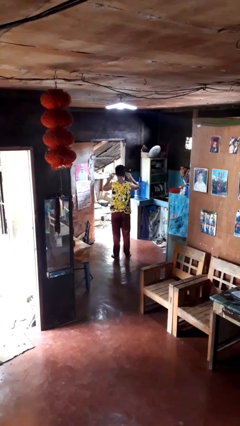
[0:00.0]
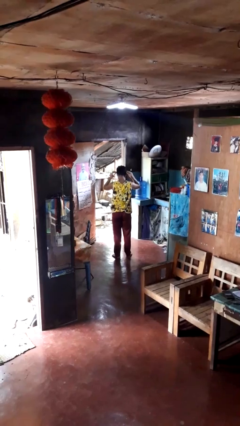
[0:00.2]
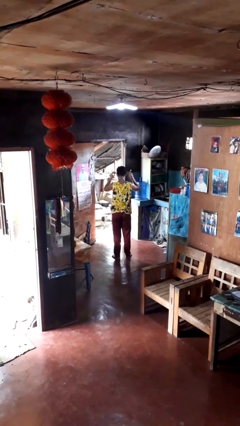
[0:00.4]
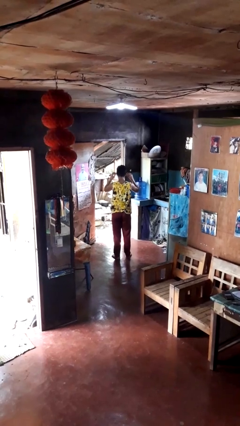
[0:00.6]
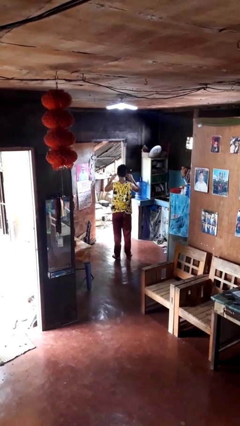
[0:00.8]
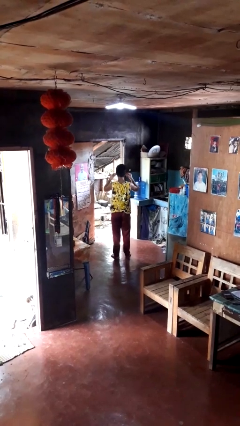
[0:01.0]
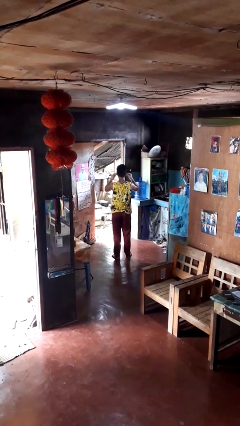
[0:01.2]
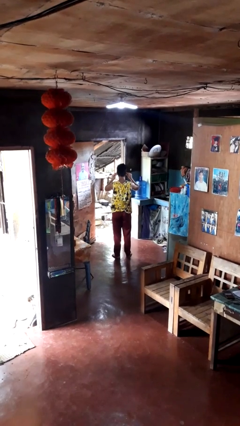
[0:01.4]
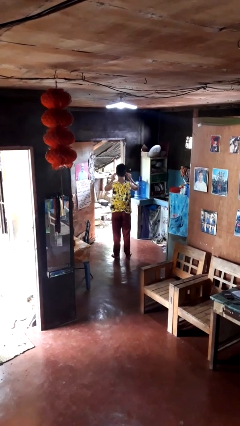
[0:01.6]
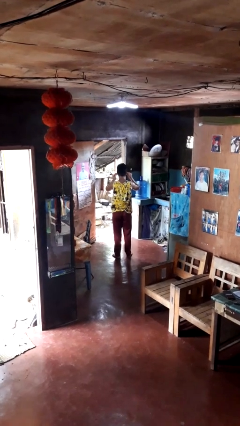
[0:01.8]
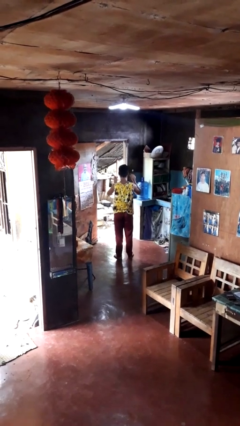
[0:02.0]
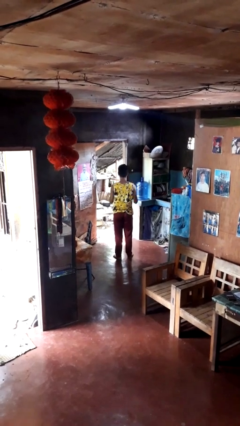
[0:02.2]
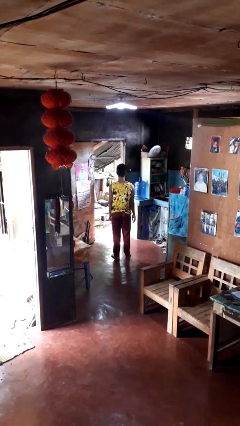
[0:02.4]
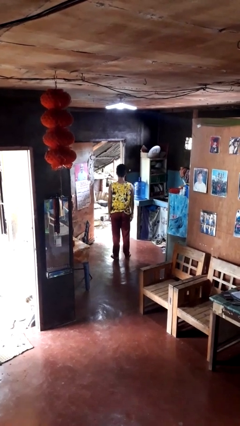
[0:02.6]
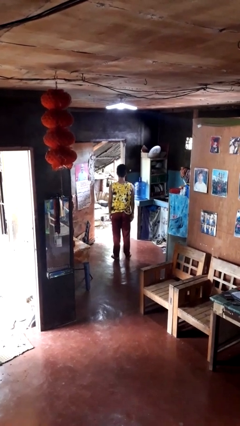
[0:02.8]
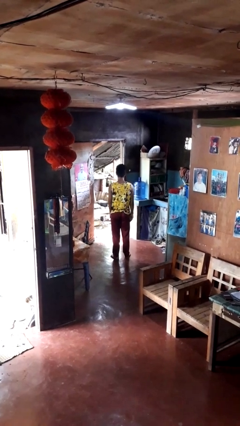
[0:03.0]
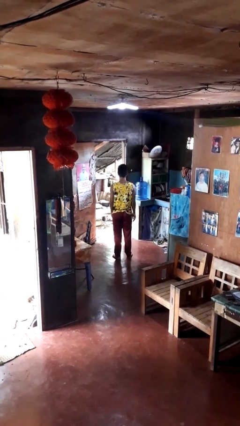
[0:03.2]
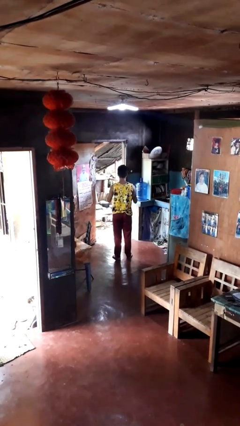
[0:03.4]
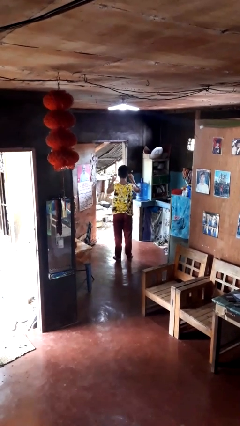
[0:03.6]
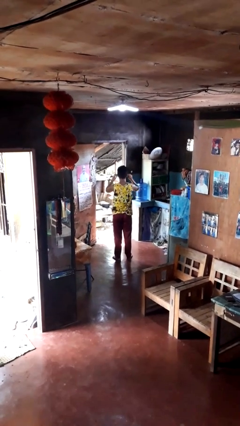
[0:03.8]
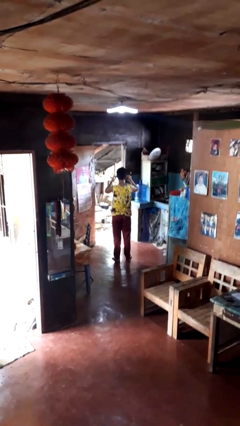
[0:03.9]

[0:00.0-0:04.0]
person puts on headphones

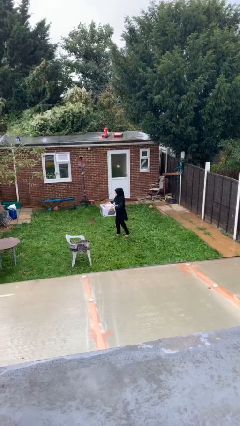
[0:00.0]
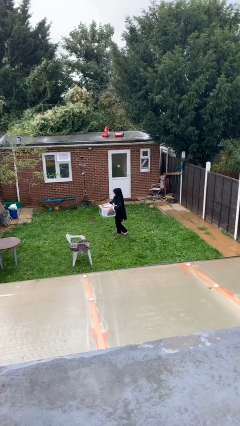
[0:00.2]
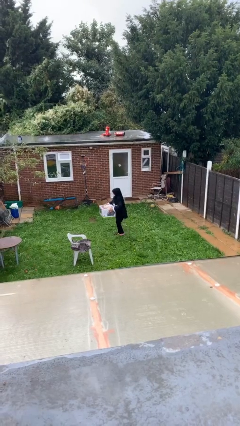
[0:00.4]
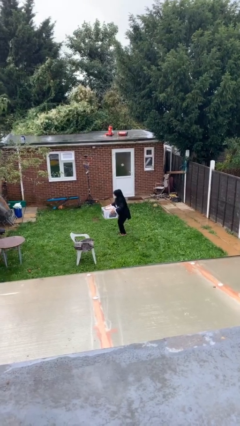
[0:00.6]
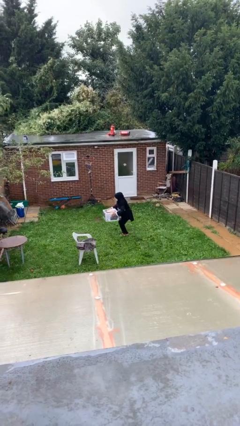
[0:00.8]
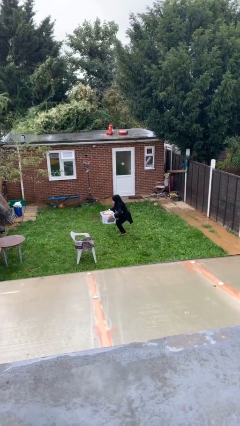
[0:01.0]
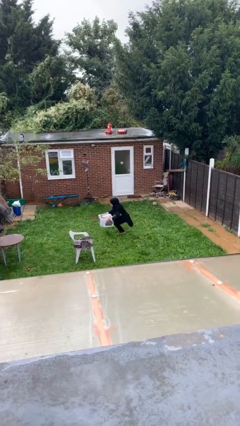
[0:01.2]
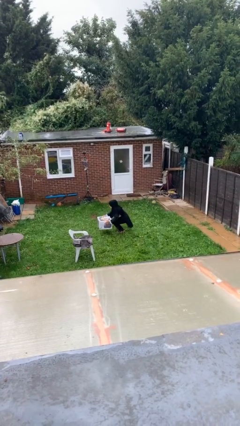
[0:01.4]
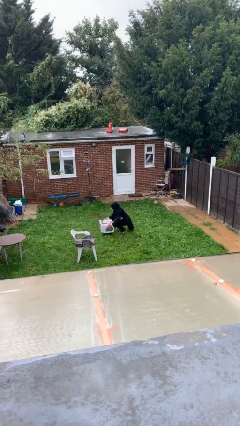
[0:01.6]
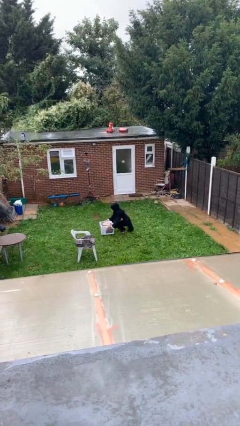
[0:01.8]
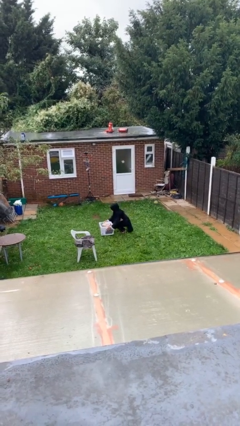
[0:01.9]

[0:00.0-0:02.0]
person puts down object on floor

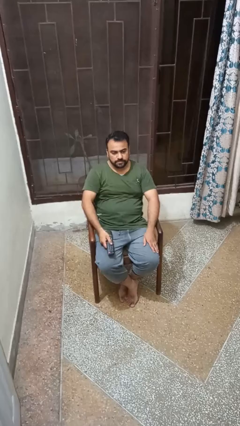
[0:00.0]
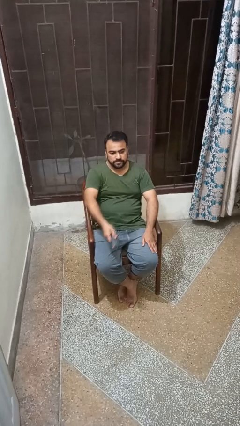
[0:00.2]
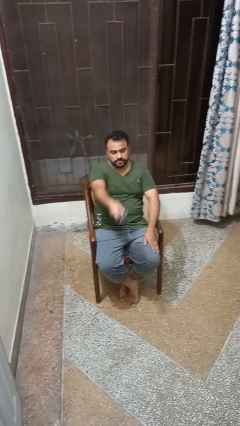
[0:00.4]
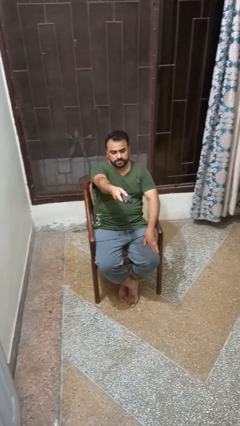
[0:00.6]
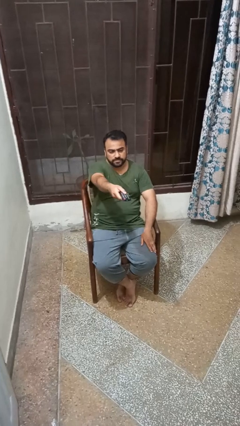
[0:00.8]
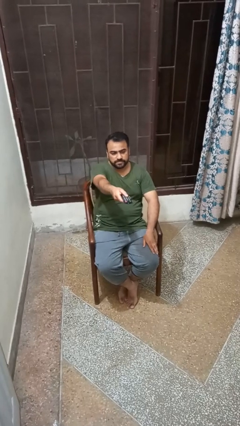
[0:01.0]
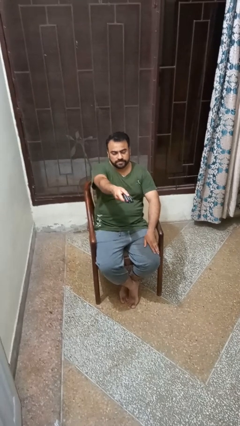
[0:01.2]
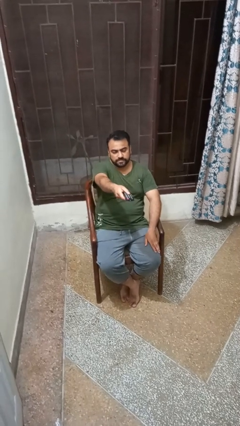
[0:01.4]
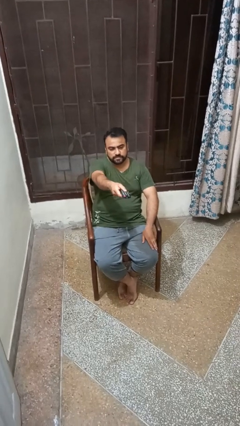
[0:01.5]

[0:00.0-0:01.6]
person uses television remote

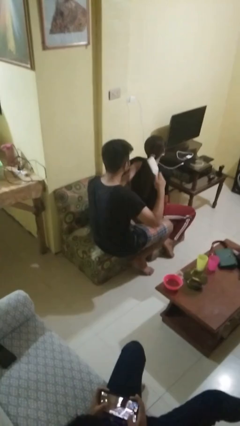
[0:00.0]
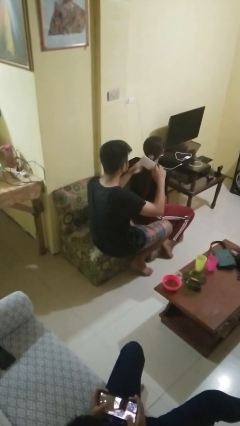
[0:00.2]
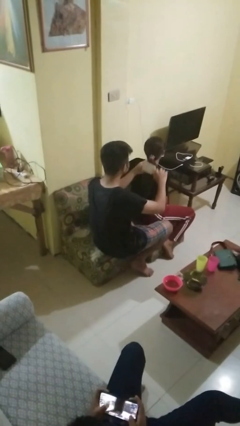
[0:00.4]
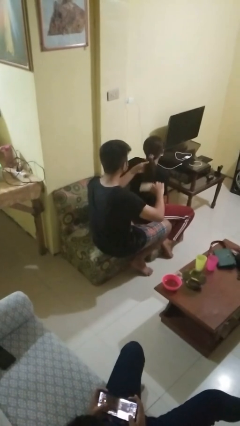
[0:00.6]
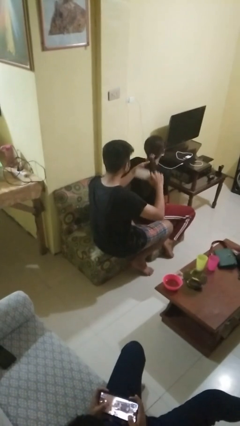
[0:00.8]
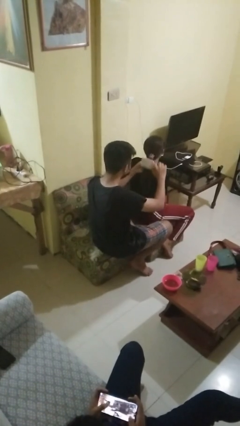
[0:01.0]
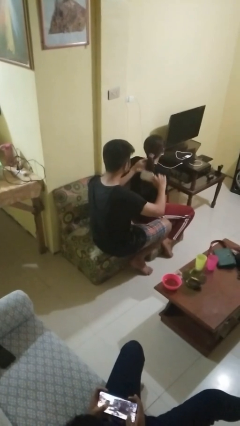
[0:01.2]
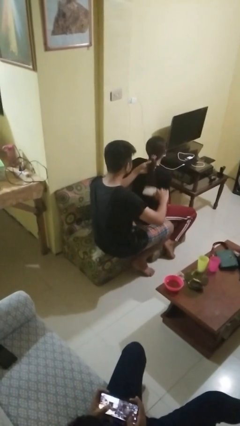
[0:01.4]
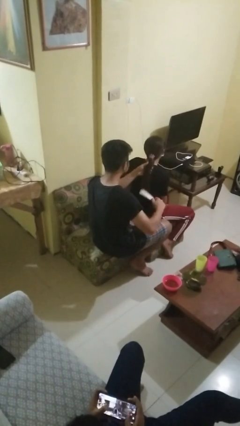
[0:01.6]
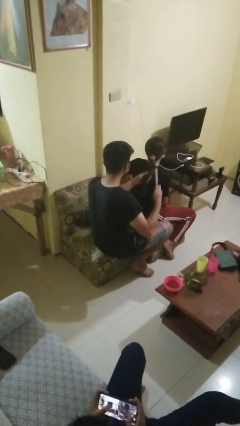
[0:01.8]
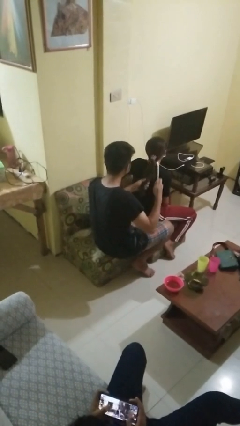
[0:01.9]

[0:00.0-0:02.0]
person brushes hair of person

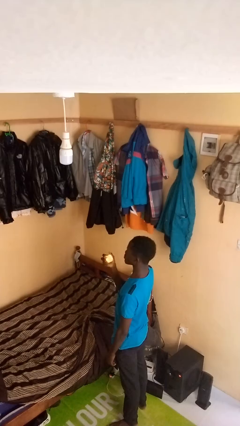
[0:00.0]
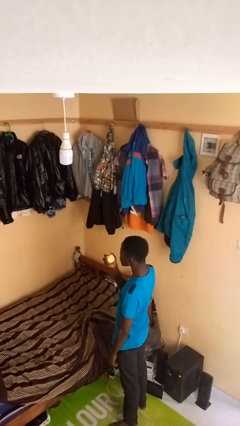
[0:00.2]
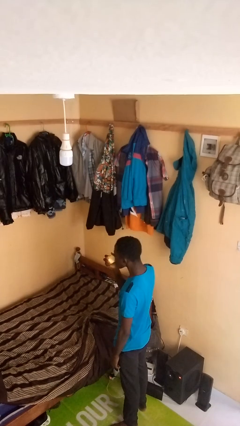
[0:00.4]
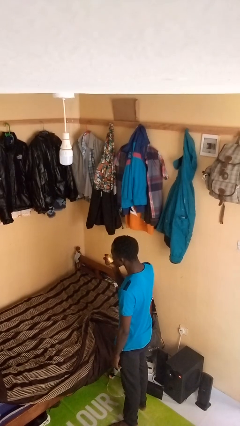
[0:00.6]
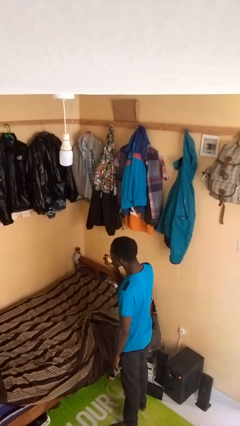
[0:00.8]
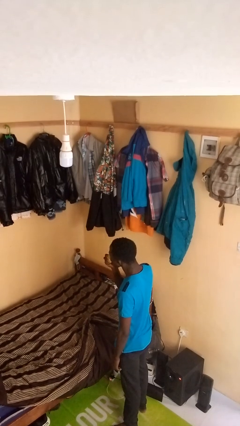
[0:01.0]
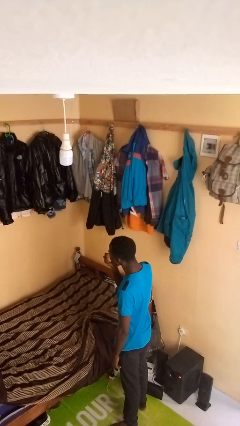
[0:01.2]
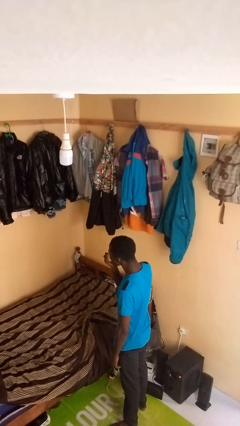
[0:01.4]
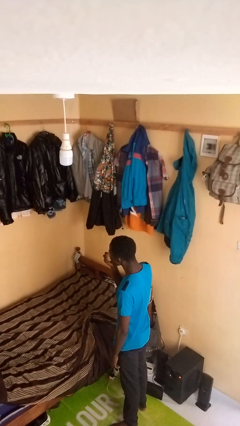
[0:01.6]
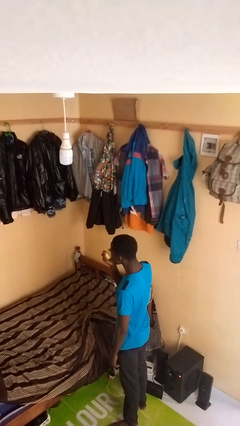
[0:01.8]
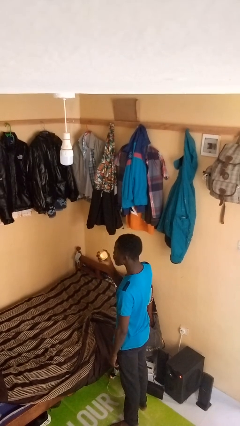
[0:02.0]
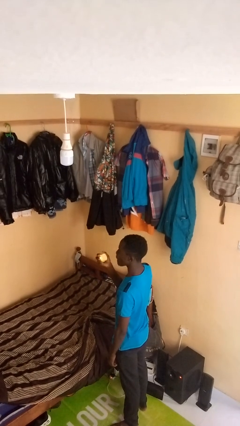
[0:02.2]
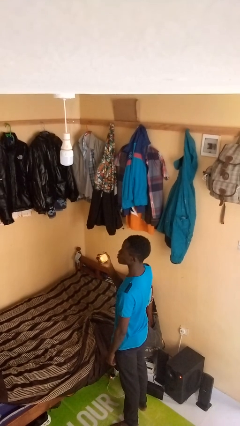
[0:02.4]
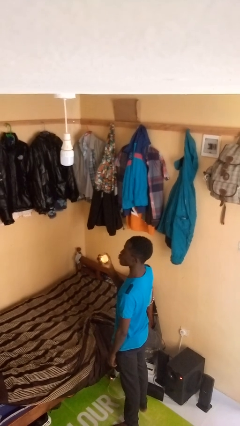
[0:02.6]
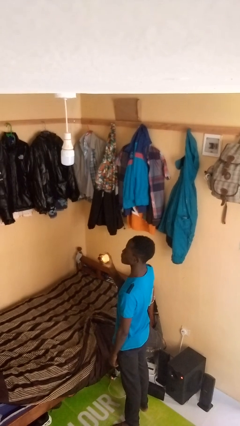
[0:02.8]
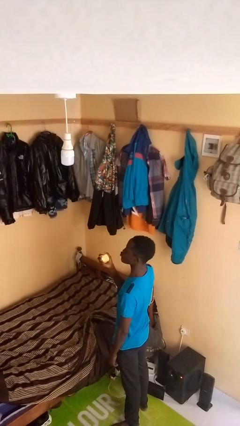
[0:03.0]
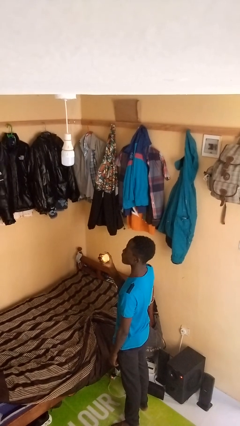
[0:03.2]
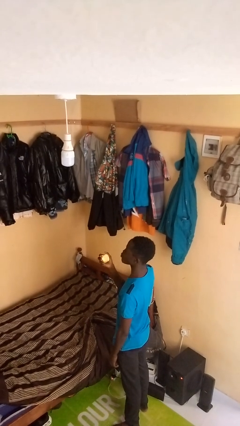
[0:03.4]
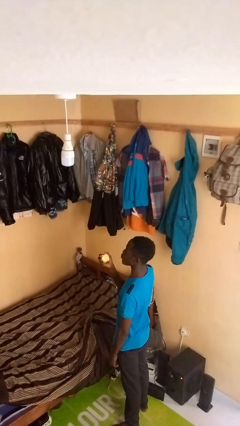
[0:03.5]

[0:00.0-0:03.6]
person eats apple

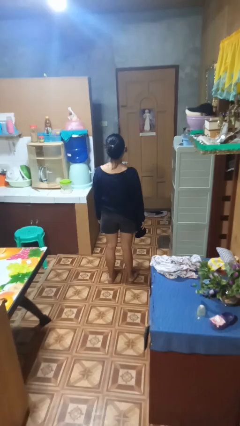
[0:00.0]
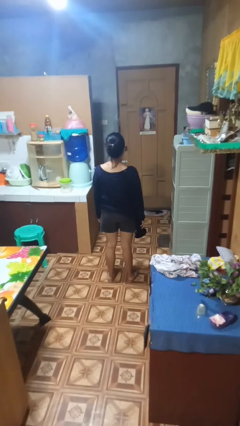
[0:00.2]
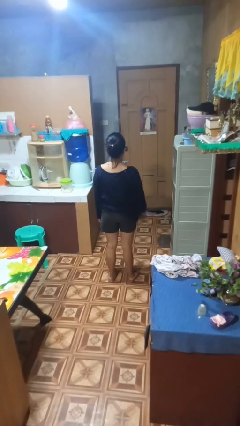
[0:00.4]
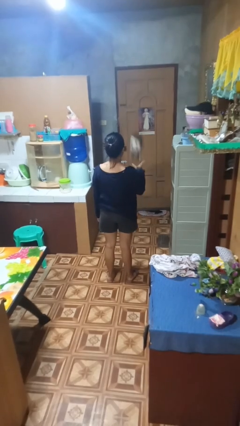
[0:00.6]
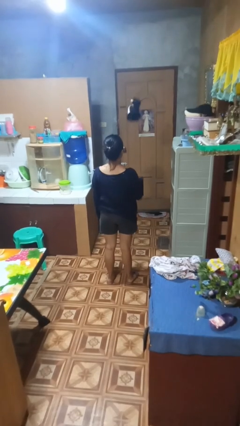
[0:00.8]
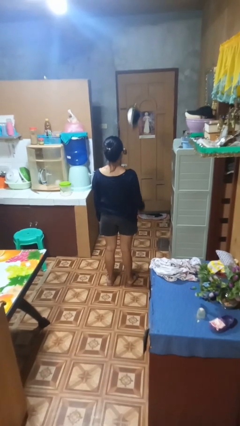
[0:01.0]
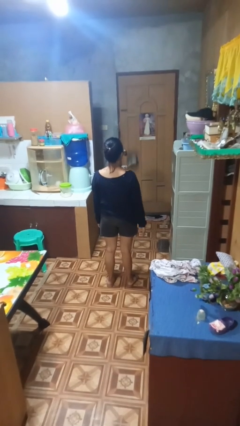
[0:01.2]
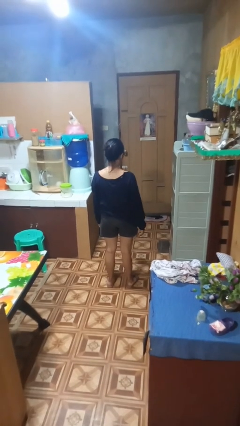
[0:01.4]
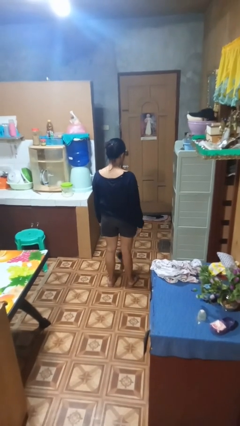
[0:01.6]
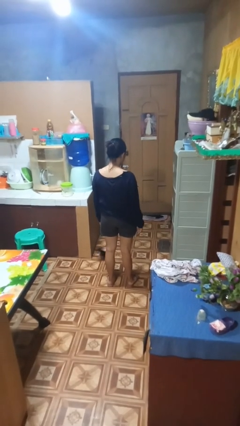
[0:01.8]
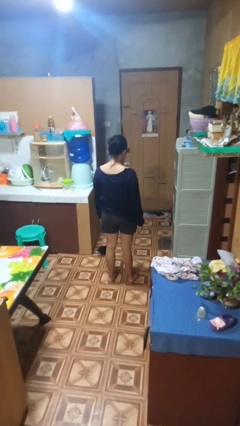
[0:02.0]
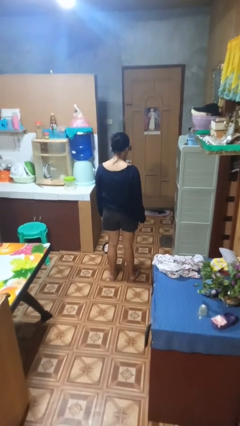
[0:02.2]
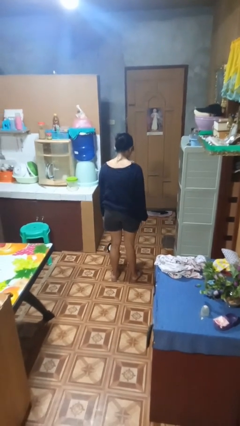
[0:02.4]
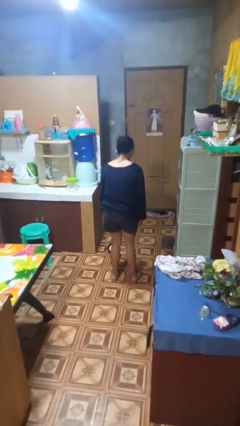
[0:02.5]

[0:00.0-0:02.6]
person throws object into air

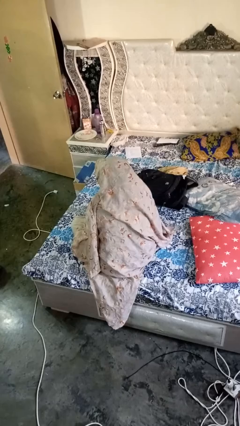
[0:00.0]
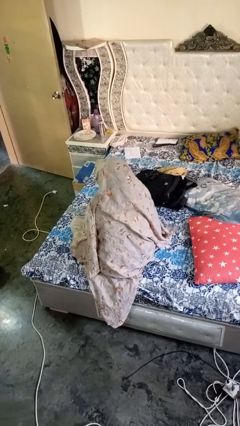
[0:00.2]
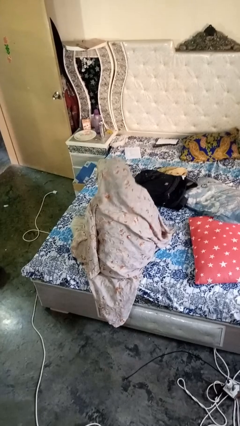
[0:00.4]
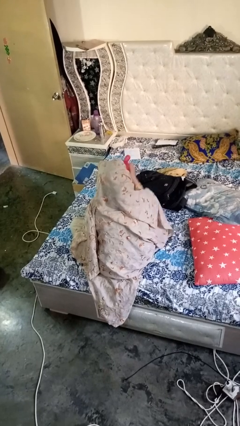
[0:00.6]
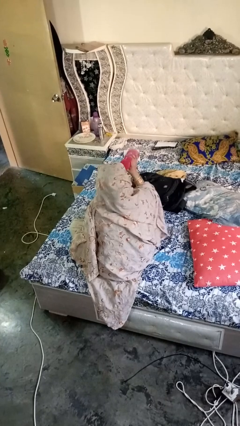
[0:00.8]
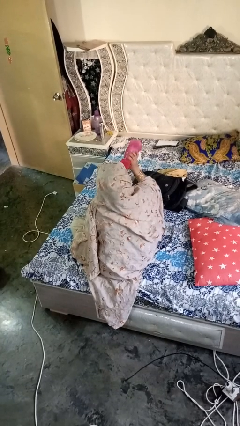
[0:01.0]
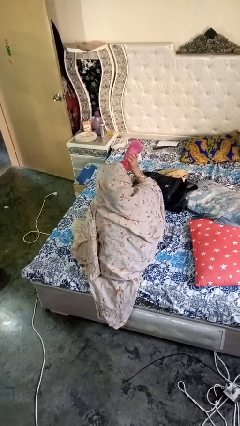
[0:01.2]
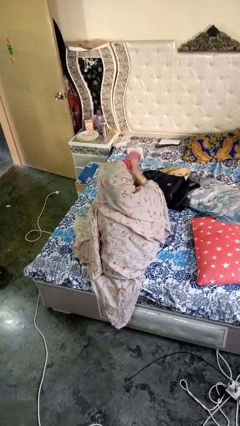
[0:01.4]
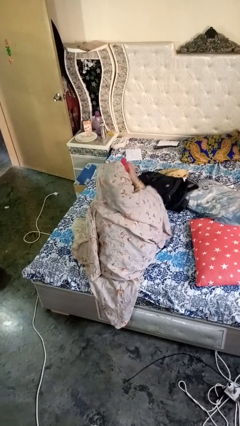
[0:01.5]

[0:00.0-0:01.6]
person drinks from bottle
